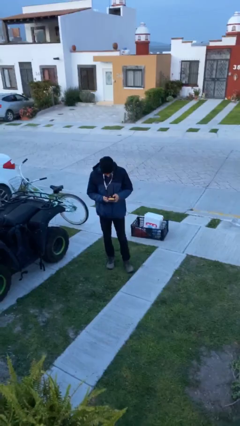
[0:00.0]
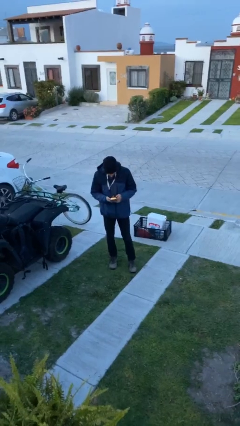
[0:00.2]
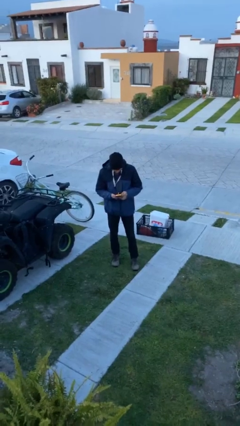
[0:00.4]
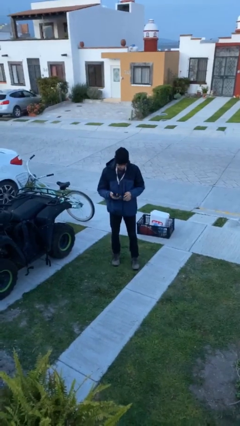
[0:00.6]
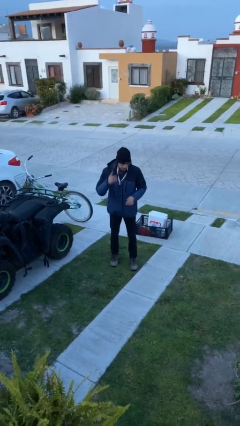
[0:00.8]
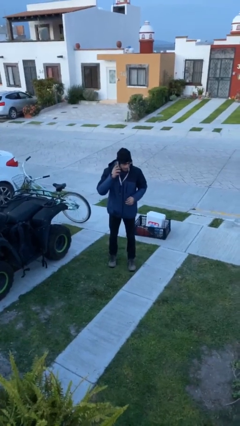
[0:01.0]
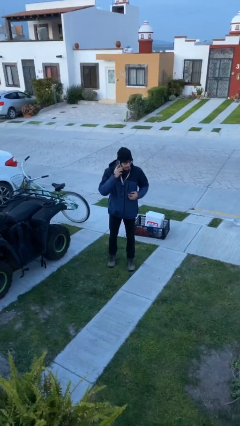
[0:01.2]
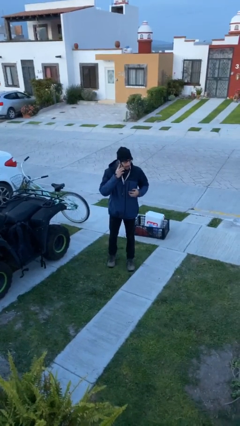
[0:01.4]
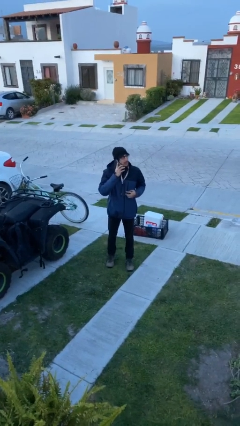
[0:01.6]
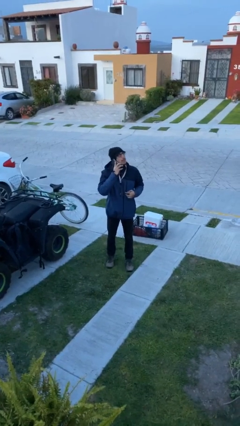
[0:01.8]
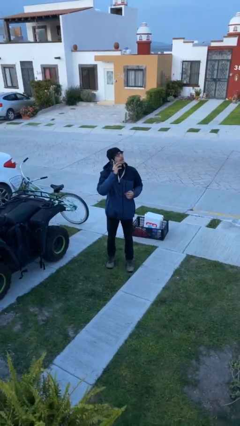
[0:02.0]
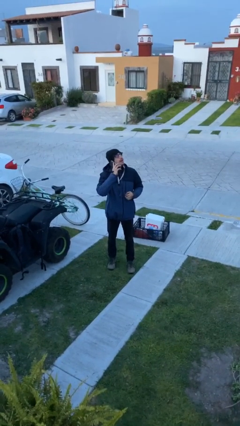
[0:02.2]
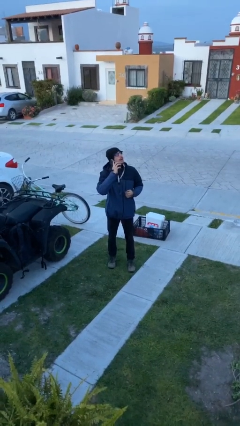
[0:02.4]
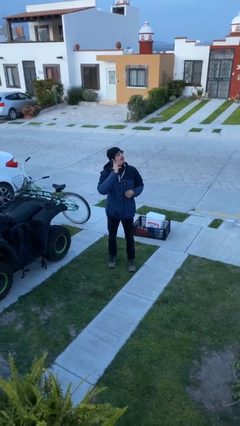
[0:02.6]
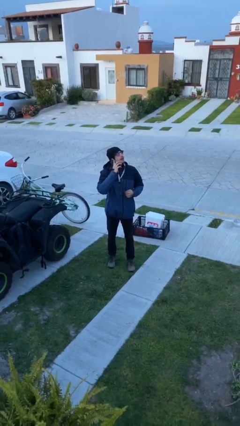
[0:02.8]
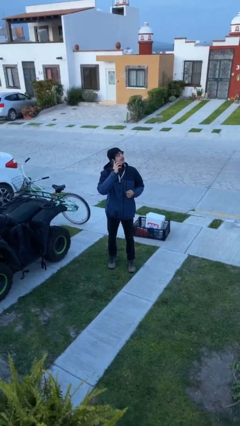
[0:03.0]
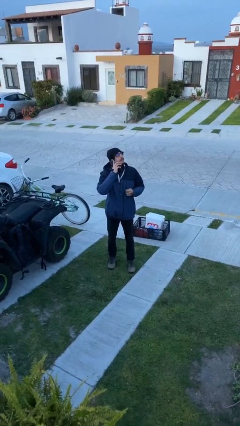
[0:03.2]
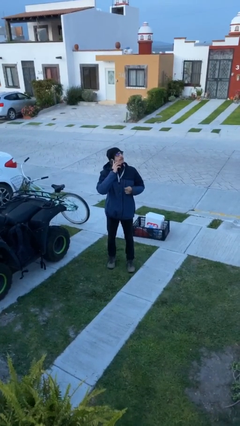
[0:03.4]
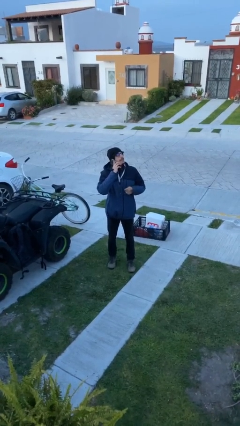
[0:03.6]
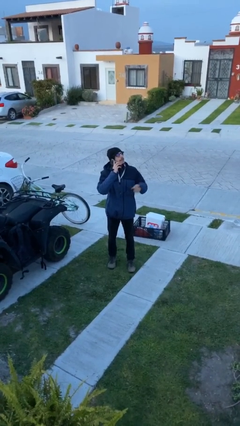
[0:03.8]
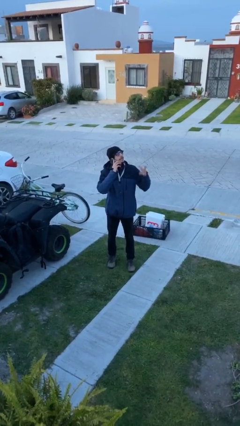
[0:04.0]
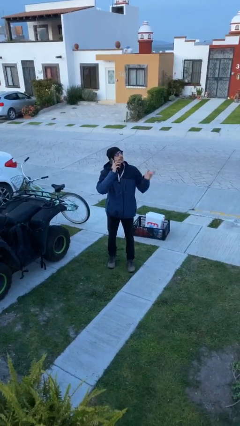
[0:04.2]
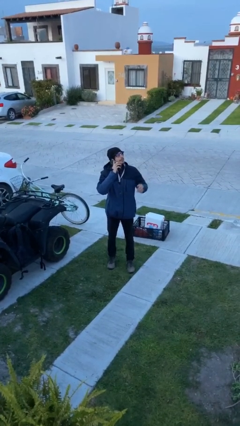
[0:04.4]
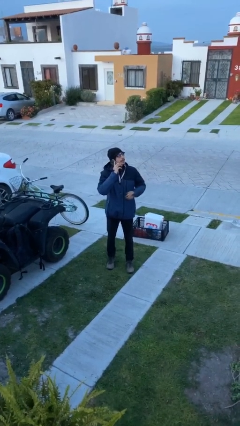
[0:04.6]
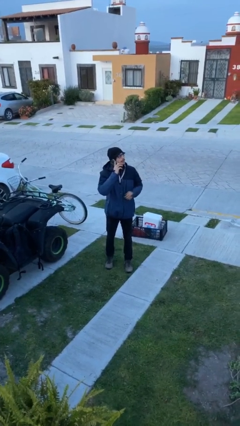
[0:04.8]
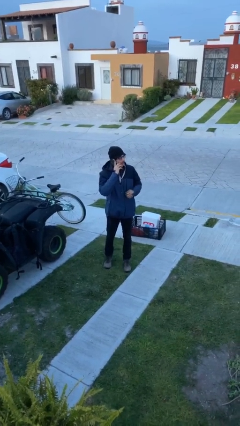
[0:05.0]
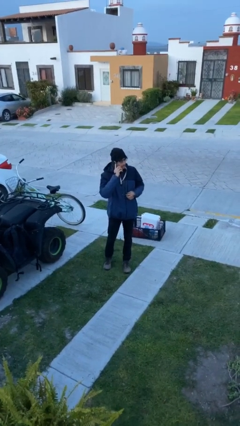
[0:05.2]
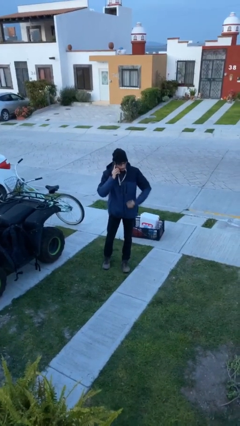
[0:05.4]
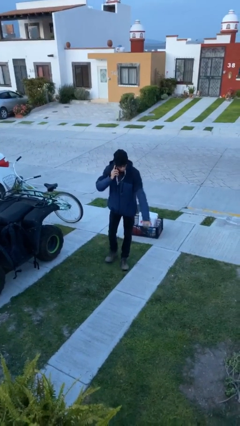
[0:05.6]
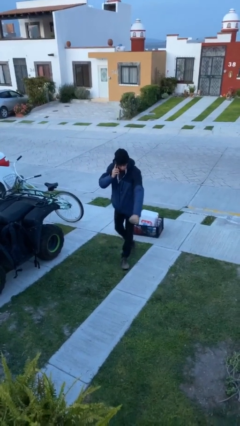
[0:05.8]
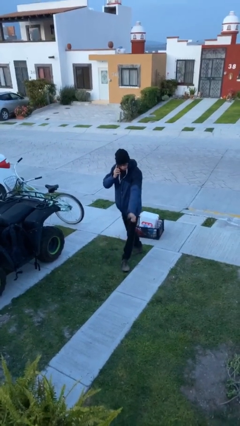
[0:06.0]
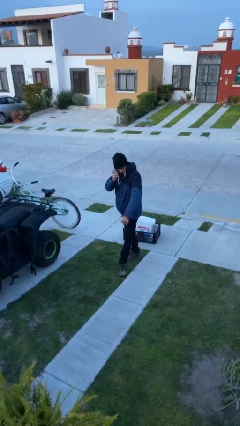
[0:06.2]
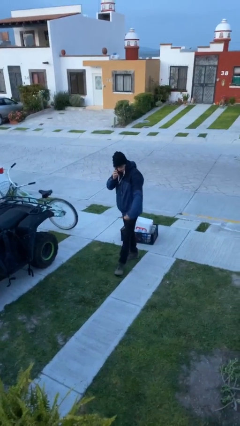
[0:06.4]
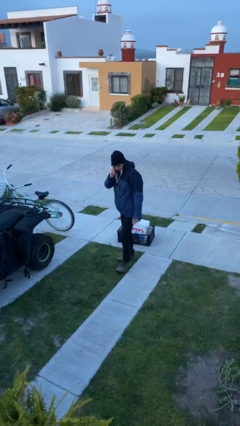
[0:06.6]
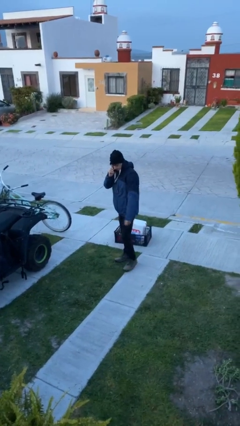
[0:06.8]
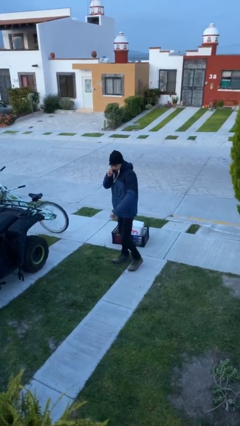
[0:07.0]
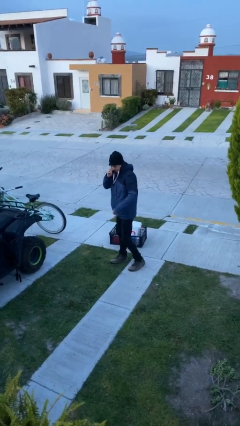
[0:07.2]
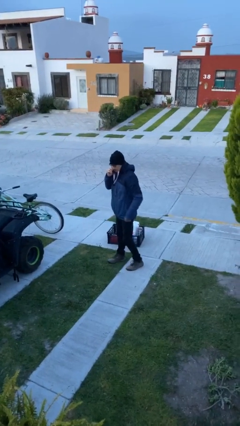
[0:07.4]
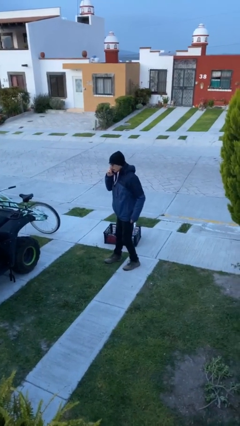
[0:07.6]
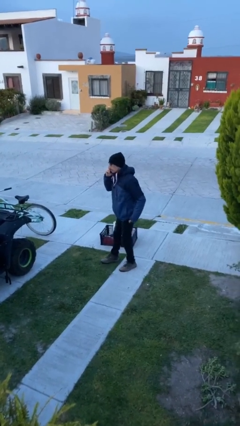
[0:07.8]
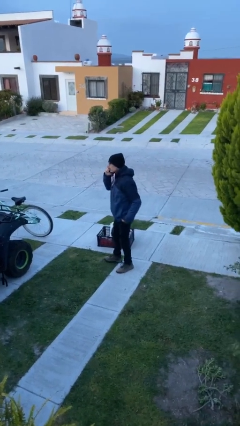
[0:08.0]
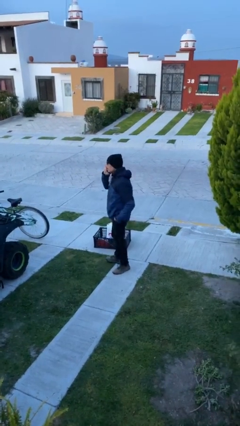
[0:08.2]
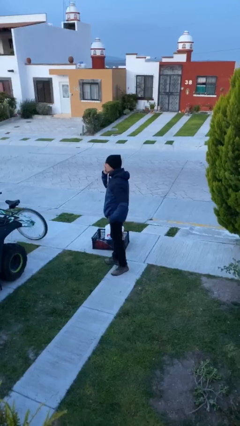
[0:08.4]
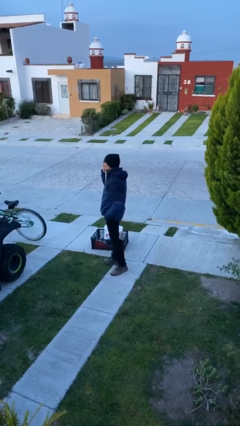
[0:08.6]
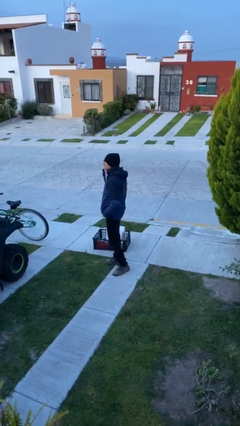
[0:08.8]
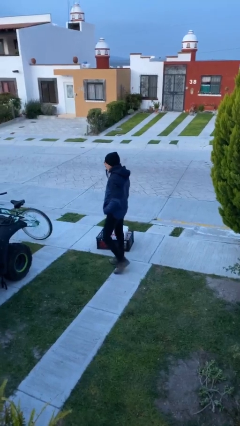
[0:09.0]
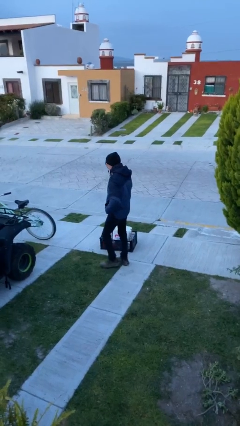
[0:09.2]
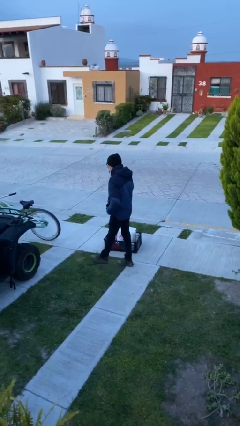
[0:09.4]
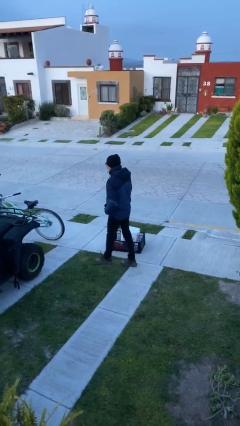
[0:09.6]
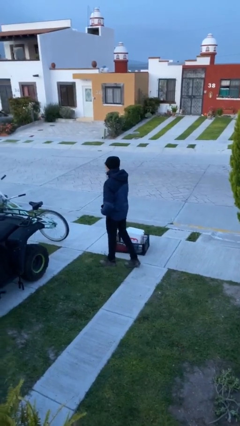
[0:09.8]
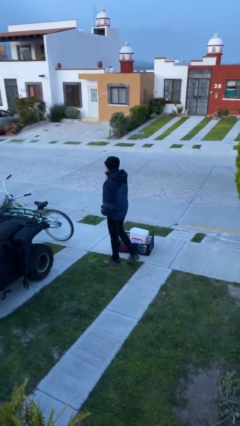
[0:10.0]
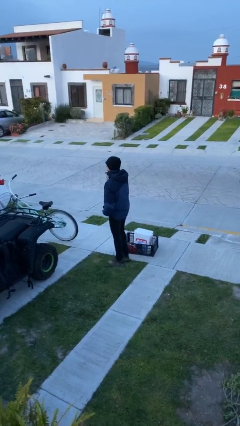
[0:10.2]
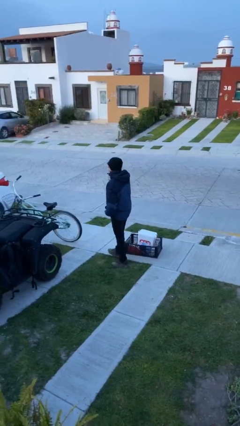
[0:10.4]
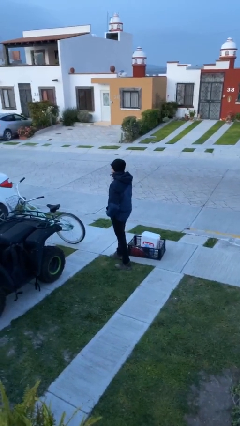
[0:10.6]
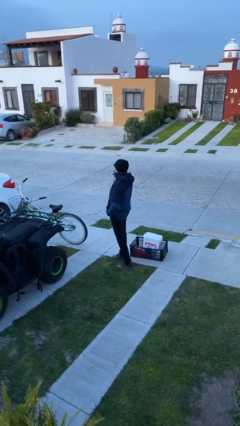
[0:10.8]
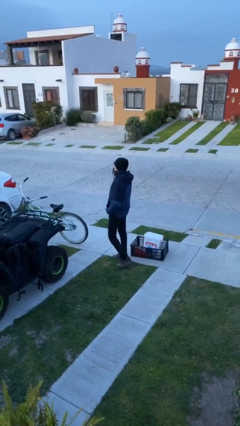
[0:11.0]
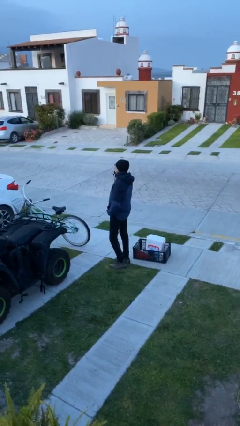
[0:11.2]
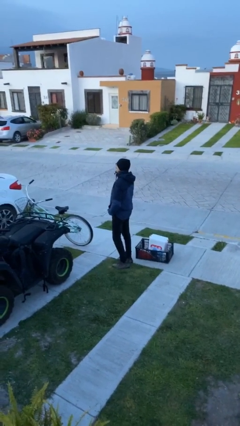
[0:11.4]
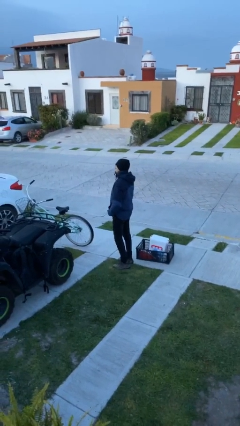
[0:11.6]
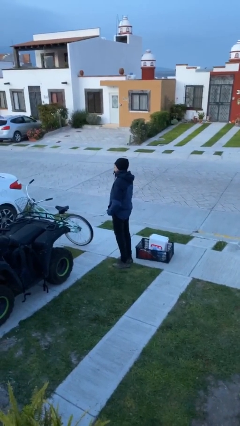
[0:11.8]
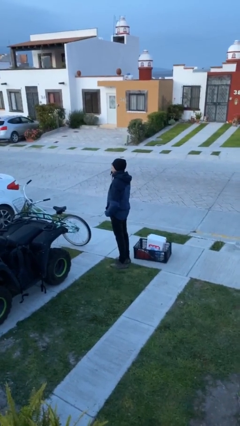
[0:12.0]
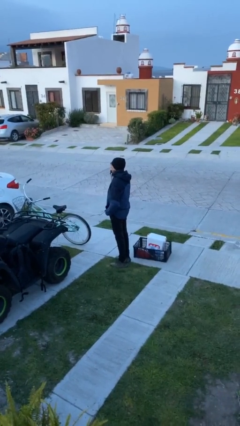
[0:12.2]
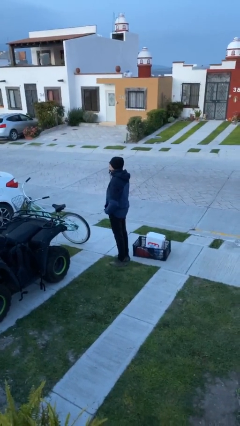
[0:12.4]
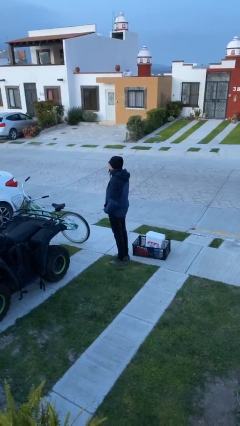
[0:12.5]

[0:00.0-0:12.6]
person talks on phone

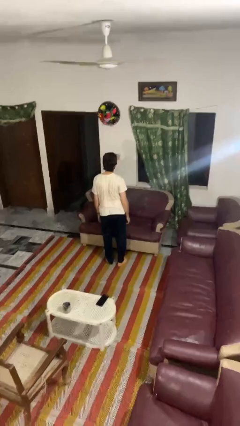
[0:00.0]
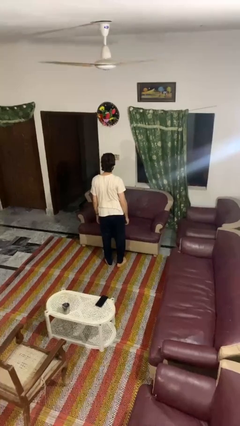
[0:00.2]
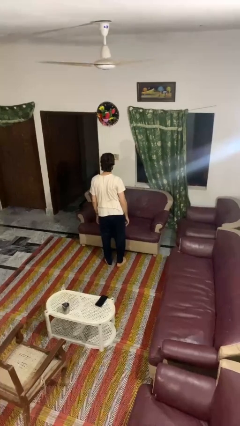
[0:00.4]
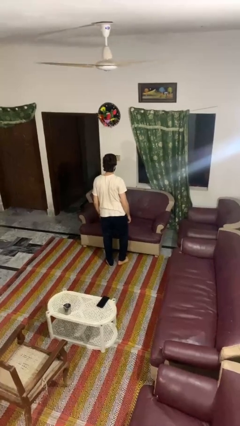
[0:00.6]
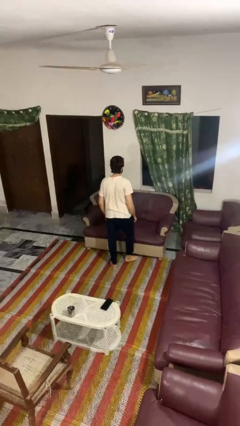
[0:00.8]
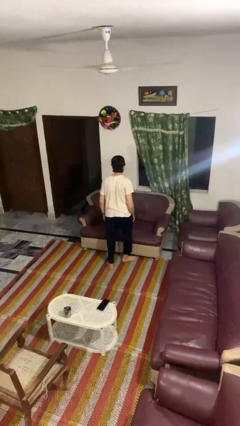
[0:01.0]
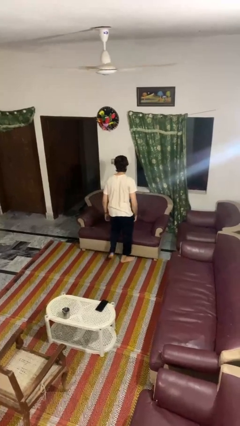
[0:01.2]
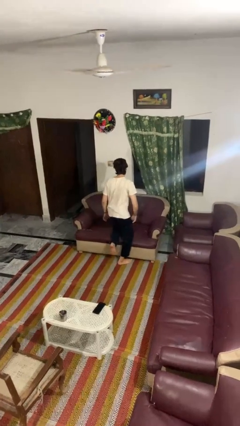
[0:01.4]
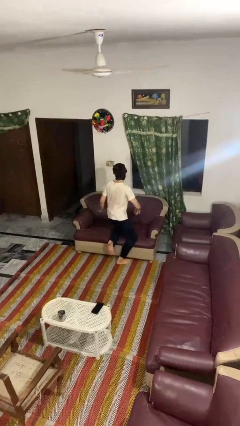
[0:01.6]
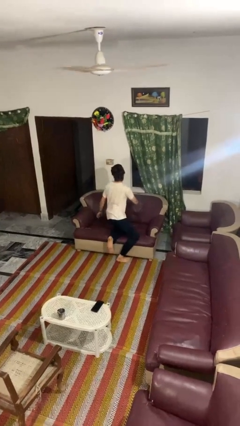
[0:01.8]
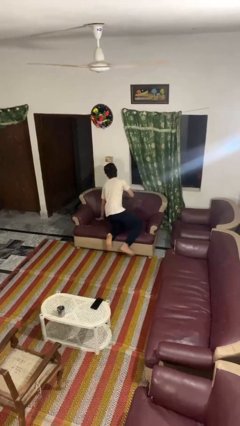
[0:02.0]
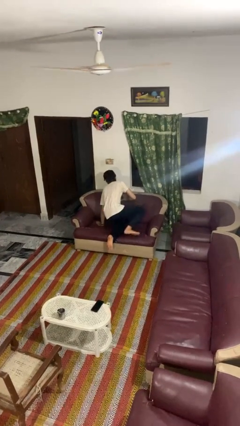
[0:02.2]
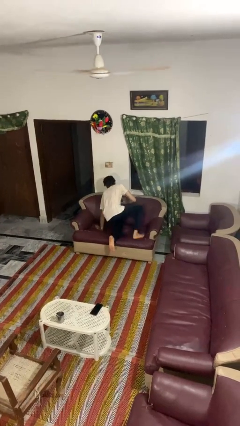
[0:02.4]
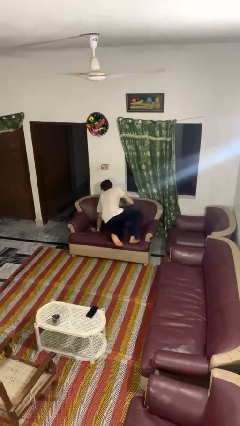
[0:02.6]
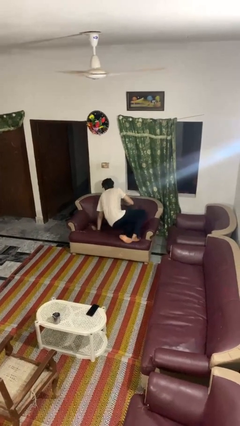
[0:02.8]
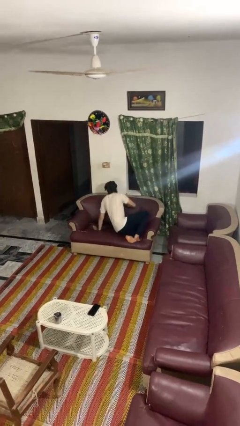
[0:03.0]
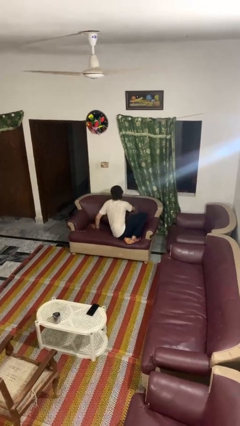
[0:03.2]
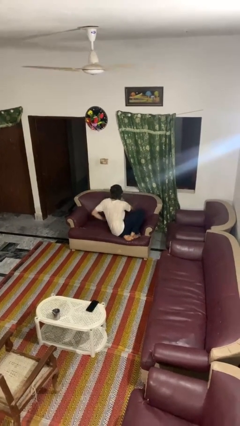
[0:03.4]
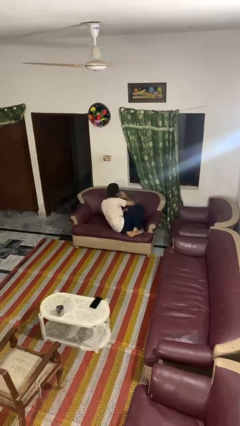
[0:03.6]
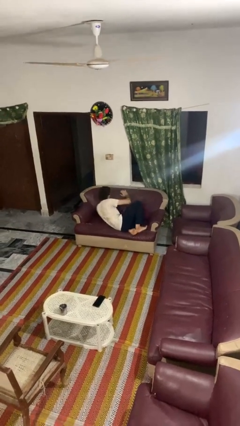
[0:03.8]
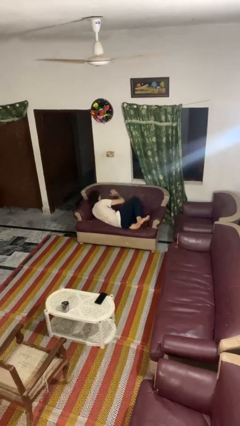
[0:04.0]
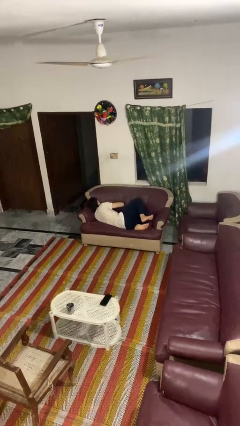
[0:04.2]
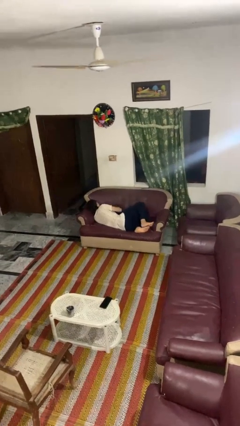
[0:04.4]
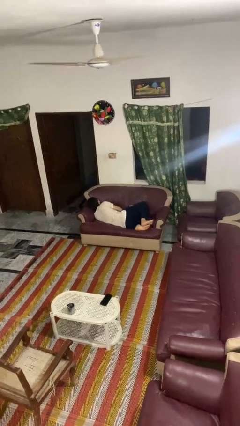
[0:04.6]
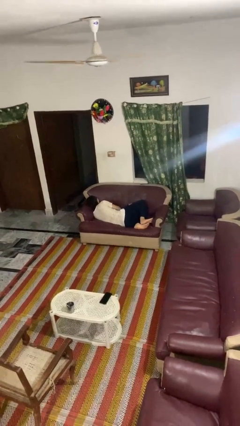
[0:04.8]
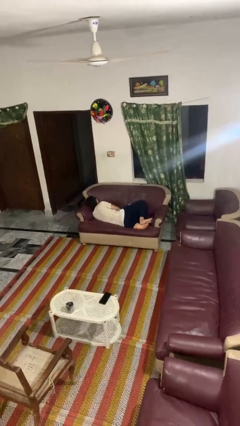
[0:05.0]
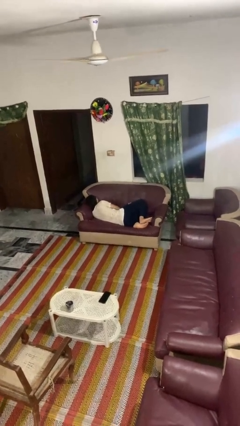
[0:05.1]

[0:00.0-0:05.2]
person lies down on couch

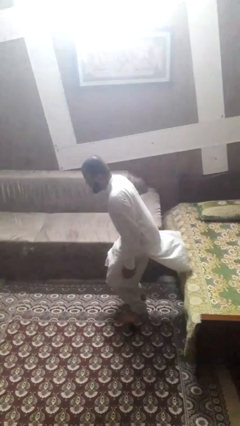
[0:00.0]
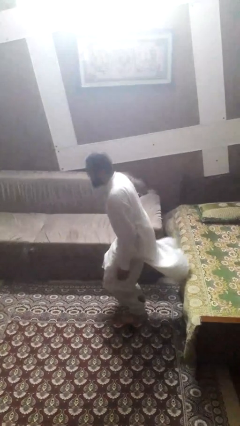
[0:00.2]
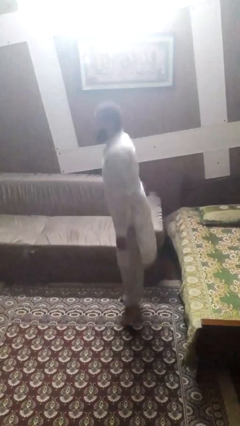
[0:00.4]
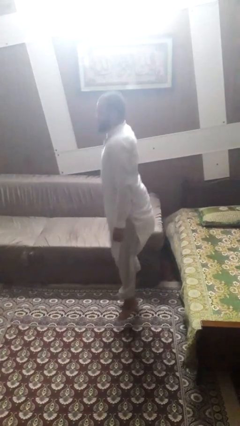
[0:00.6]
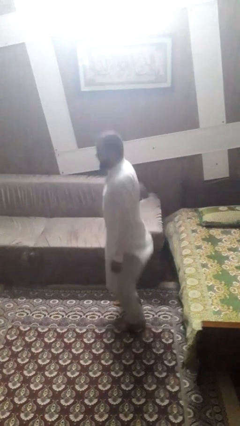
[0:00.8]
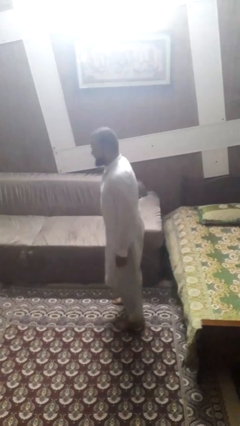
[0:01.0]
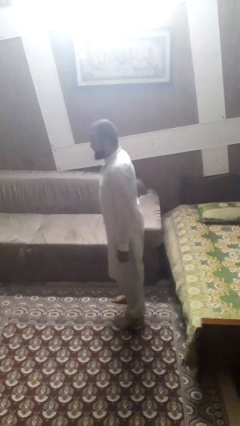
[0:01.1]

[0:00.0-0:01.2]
person jumps
